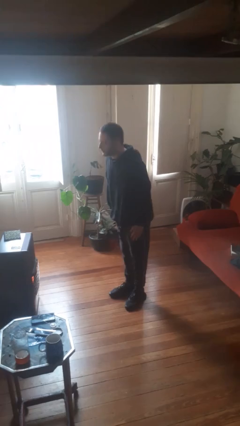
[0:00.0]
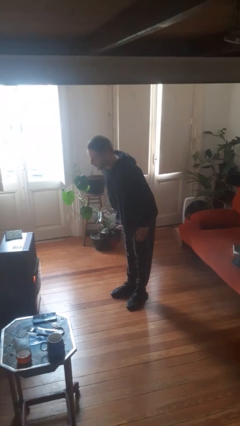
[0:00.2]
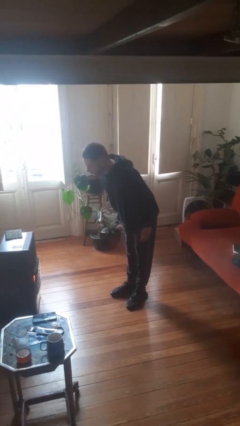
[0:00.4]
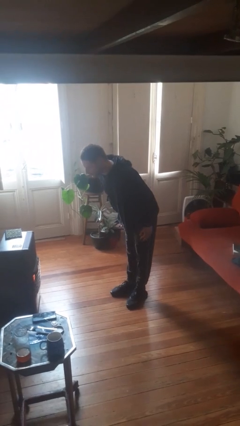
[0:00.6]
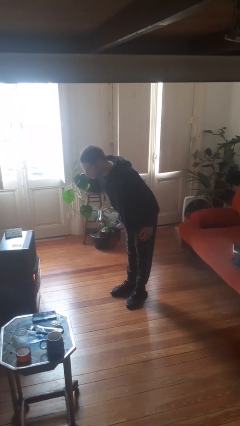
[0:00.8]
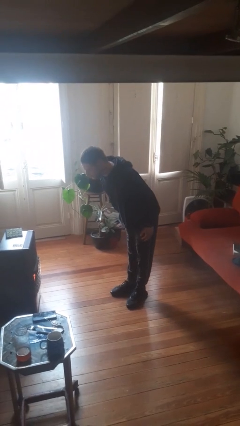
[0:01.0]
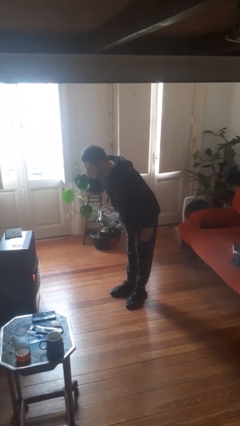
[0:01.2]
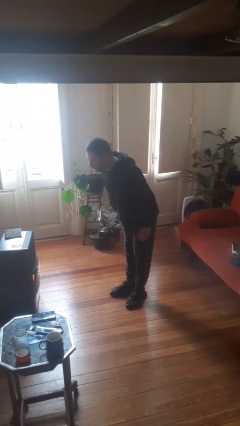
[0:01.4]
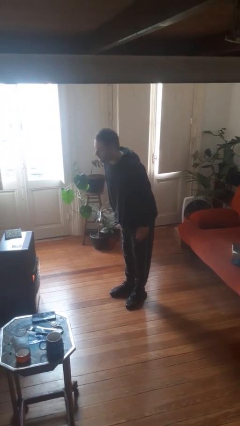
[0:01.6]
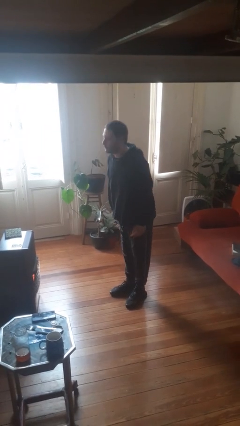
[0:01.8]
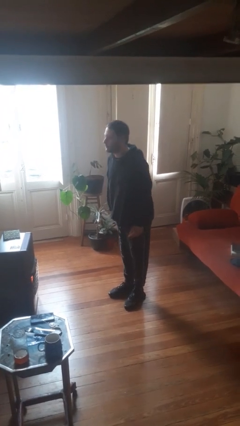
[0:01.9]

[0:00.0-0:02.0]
person bows

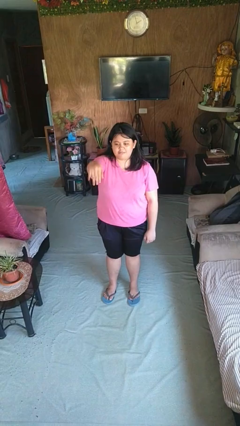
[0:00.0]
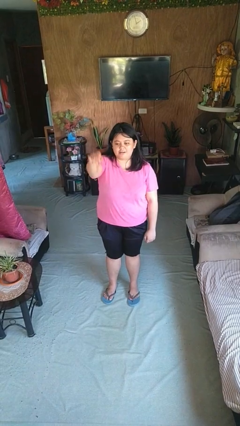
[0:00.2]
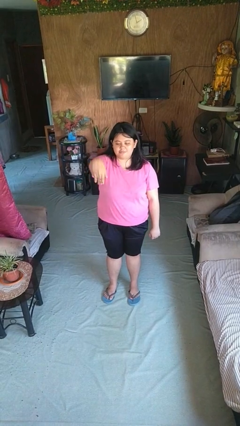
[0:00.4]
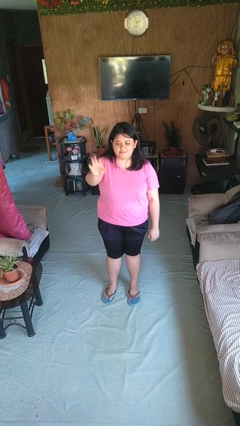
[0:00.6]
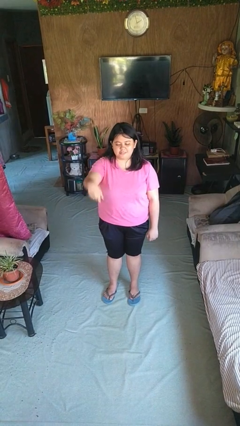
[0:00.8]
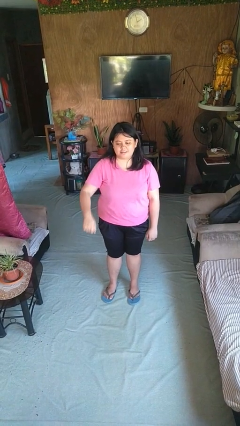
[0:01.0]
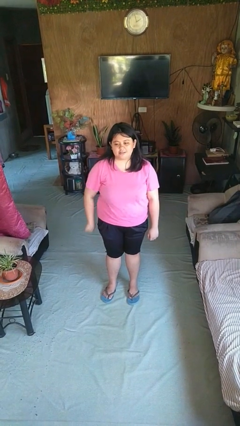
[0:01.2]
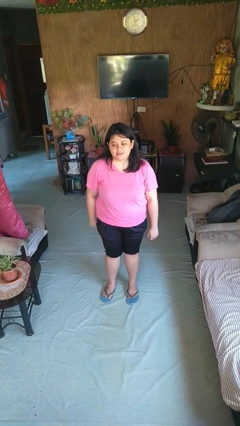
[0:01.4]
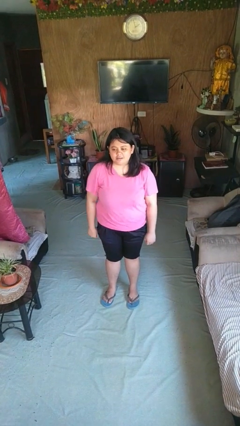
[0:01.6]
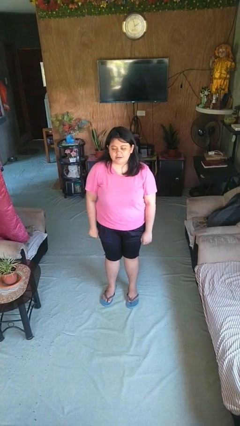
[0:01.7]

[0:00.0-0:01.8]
person gestures come here

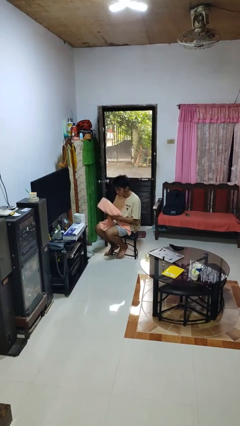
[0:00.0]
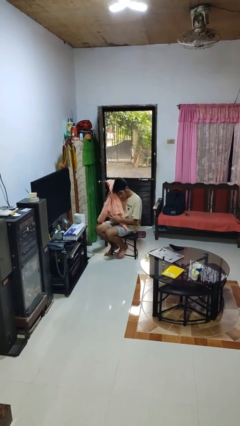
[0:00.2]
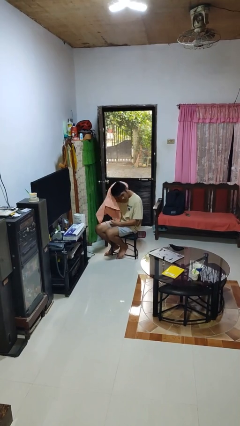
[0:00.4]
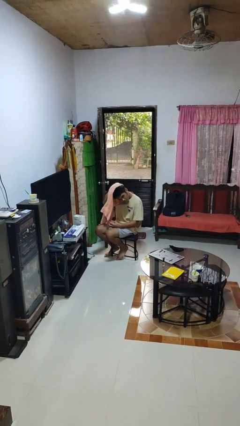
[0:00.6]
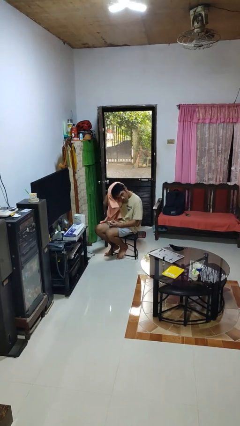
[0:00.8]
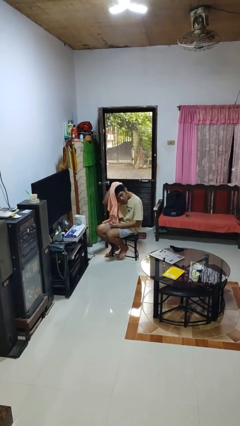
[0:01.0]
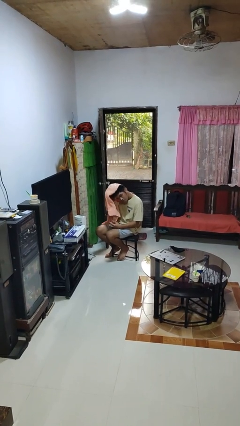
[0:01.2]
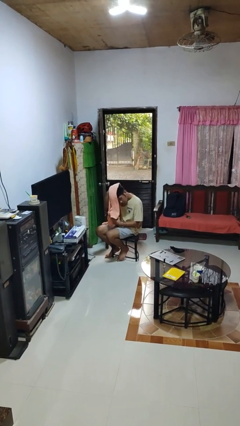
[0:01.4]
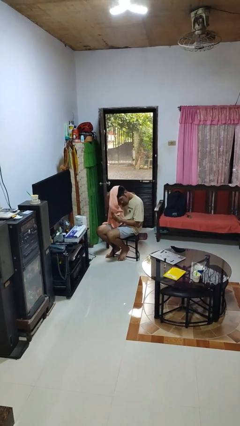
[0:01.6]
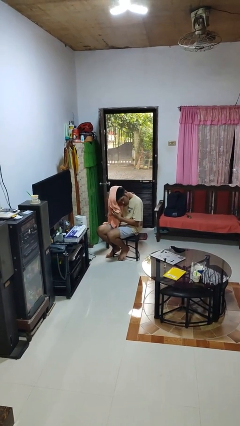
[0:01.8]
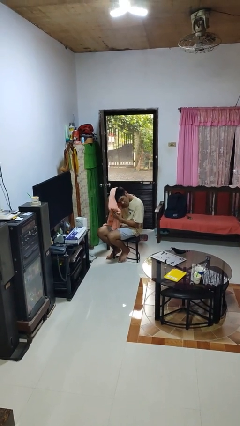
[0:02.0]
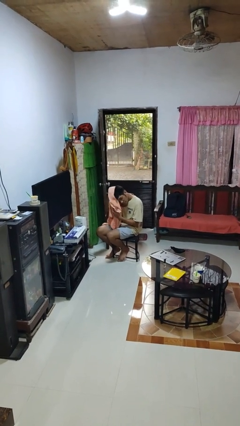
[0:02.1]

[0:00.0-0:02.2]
person dries hair with towel

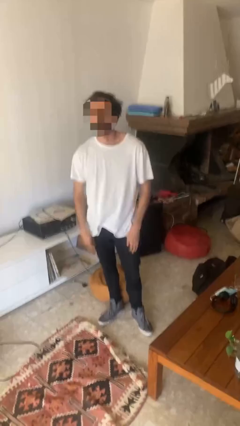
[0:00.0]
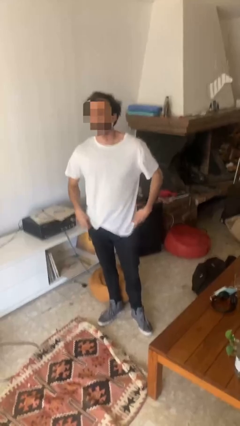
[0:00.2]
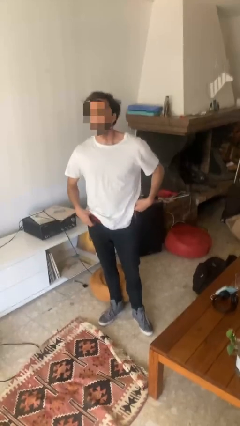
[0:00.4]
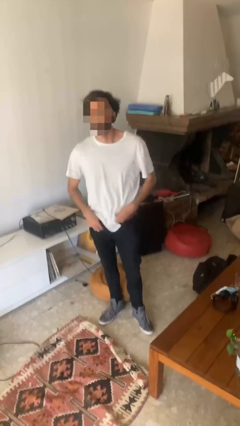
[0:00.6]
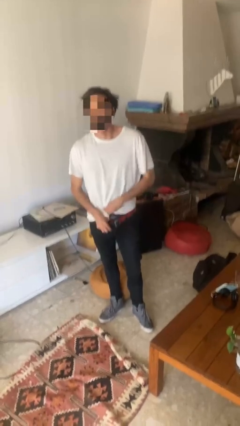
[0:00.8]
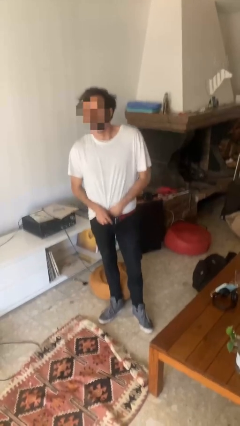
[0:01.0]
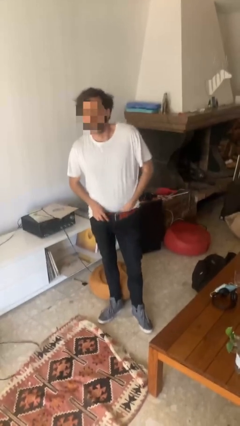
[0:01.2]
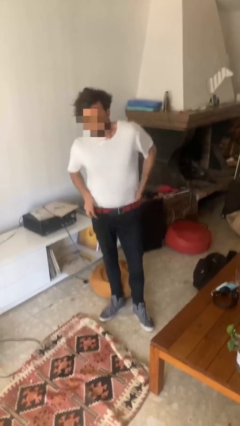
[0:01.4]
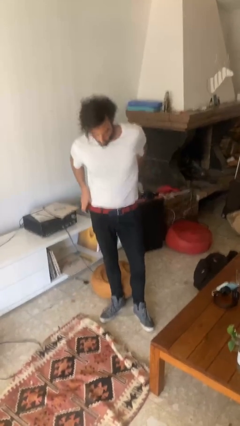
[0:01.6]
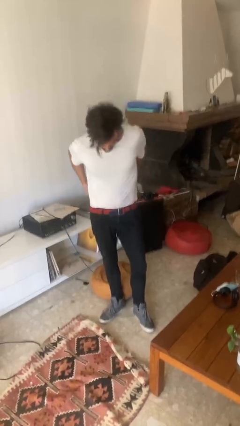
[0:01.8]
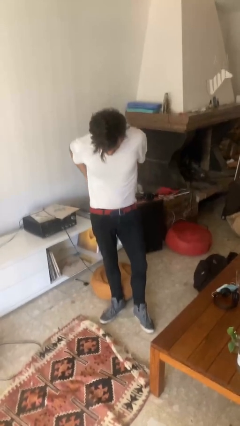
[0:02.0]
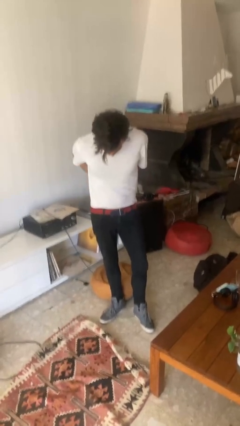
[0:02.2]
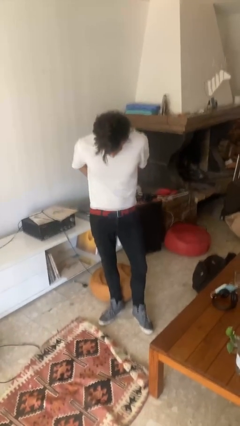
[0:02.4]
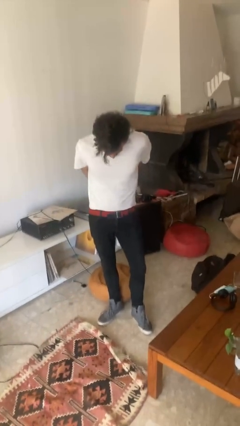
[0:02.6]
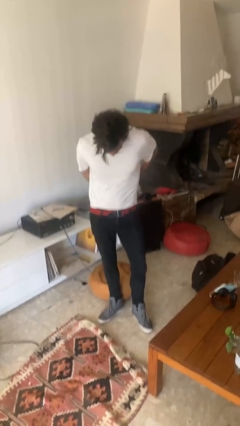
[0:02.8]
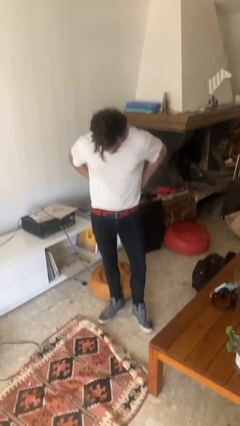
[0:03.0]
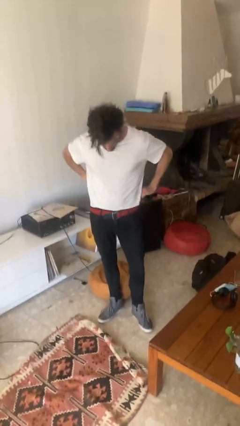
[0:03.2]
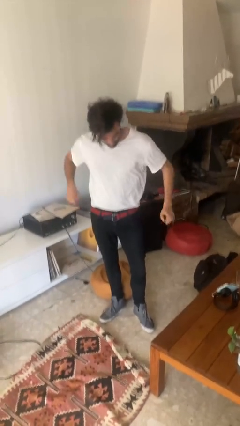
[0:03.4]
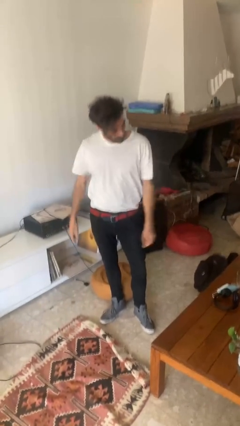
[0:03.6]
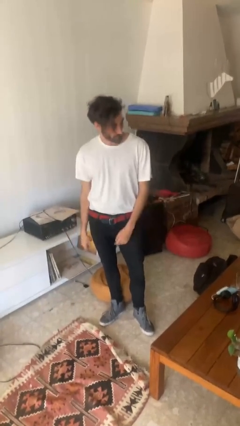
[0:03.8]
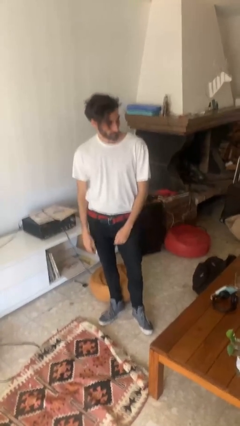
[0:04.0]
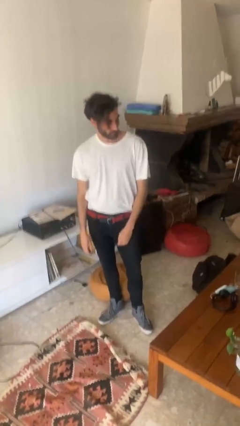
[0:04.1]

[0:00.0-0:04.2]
person tucks in shirt

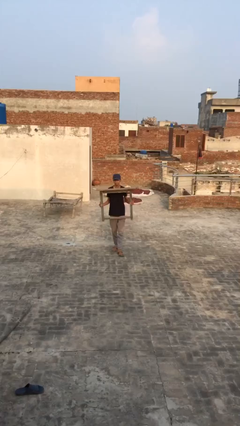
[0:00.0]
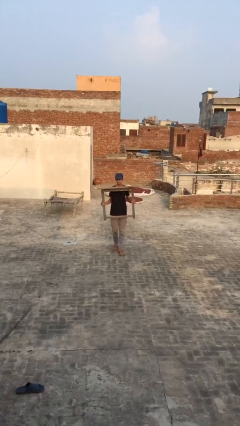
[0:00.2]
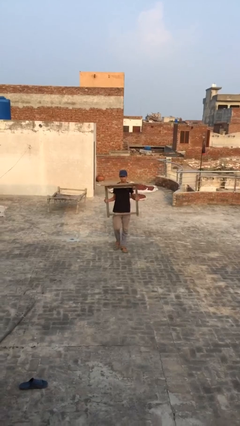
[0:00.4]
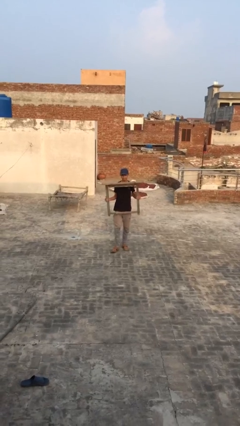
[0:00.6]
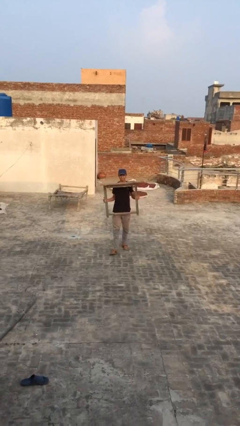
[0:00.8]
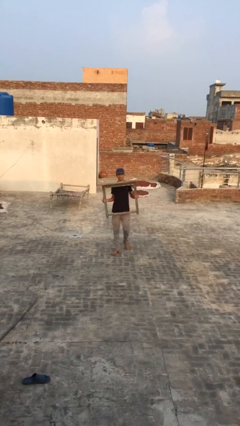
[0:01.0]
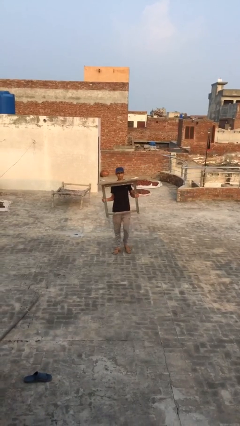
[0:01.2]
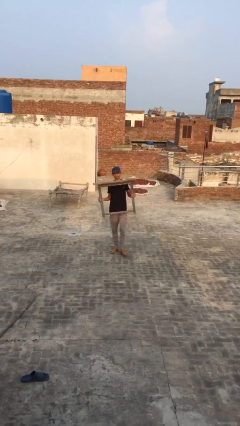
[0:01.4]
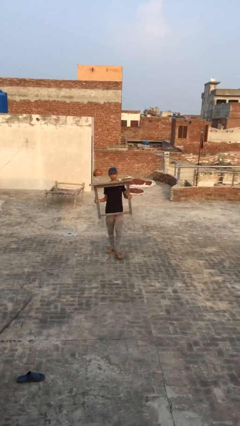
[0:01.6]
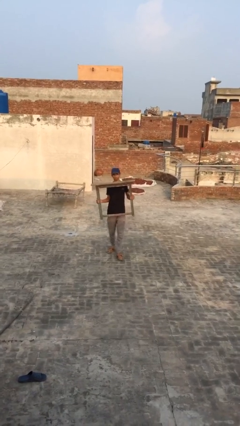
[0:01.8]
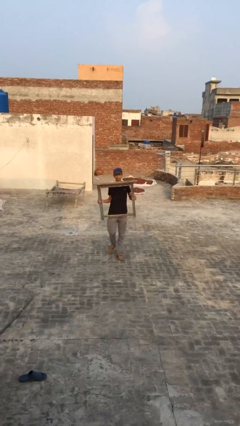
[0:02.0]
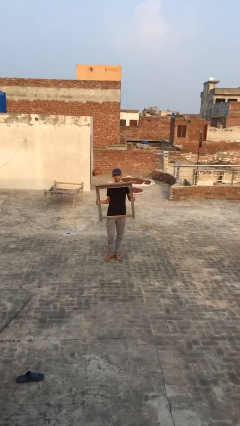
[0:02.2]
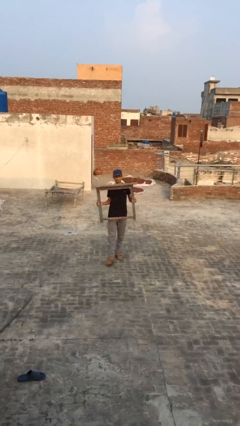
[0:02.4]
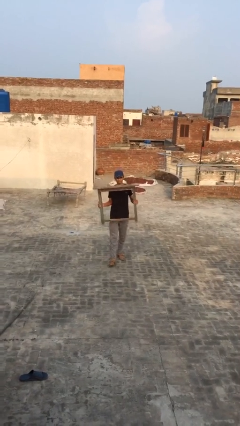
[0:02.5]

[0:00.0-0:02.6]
person carries heavy object

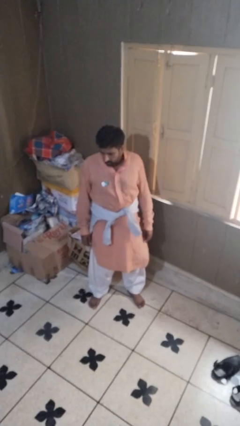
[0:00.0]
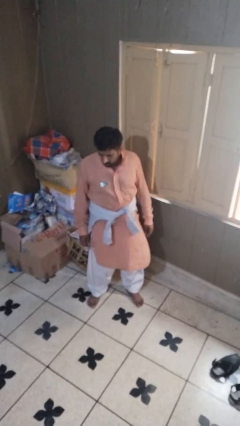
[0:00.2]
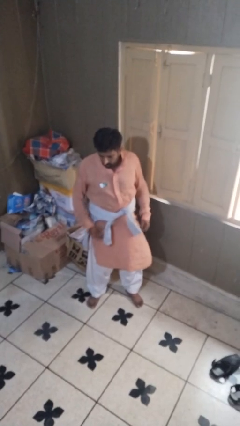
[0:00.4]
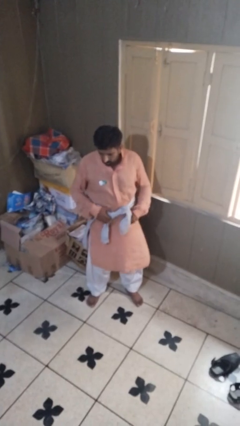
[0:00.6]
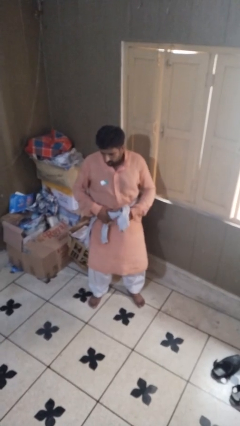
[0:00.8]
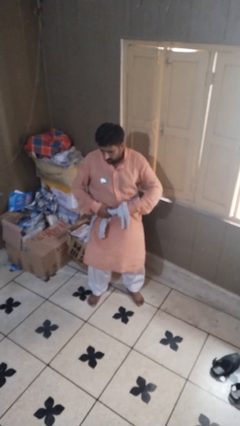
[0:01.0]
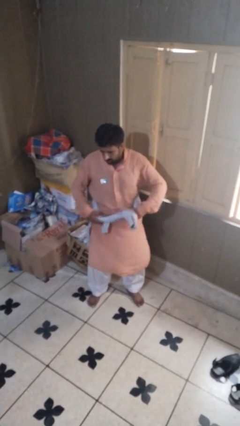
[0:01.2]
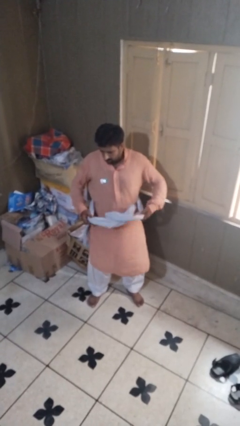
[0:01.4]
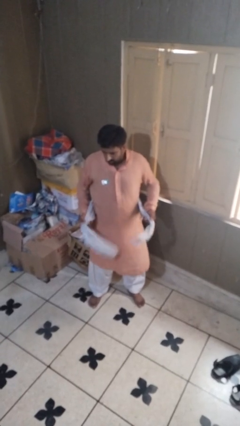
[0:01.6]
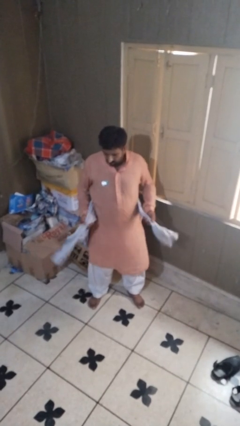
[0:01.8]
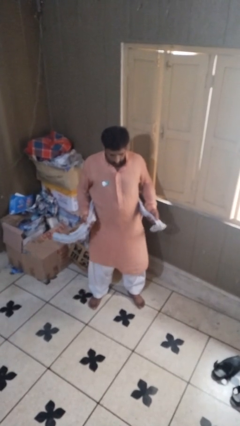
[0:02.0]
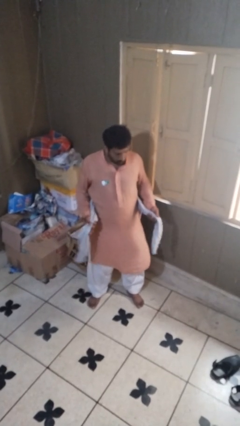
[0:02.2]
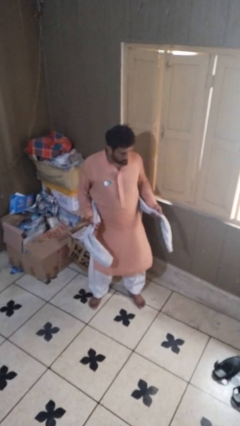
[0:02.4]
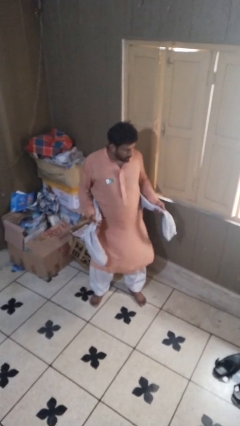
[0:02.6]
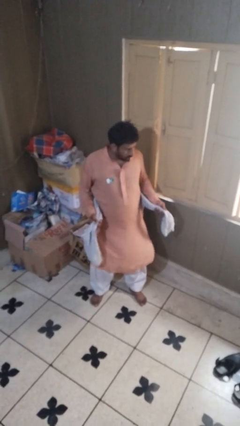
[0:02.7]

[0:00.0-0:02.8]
person unties jacket around waist

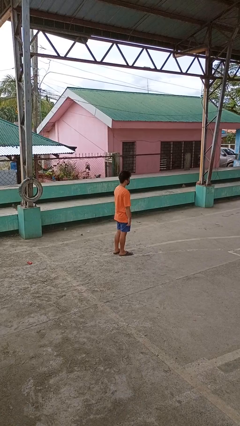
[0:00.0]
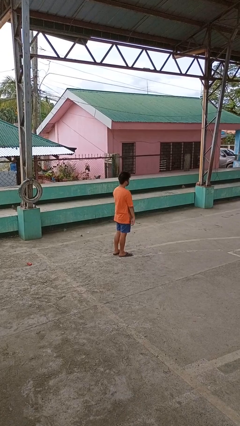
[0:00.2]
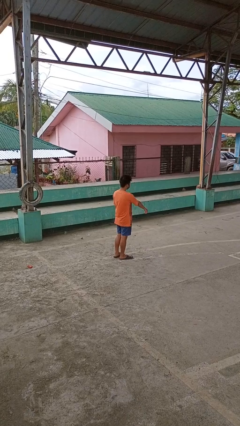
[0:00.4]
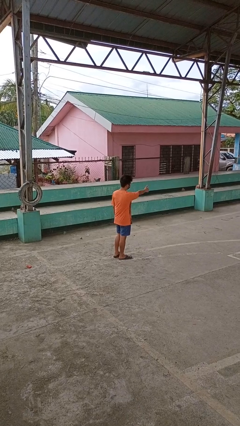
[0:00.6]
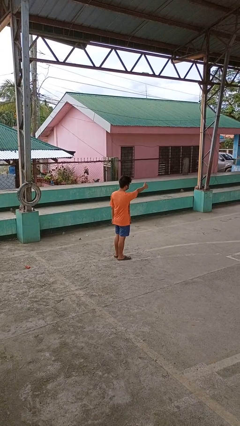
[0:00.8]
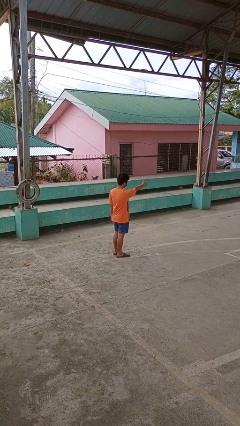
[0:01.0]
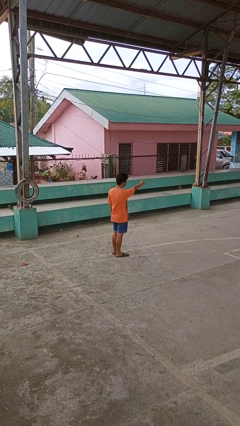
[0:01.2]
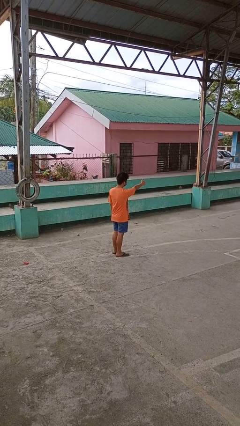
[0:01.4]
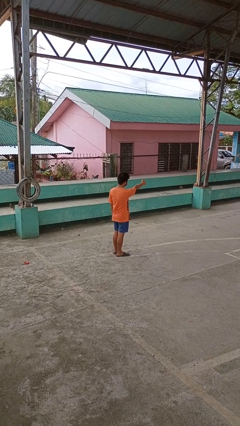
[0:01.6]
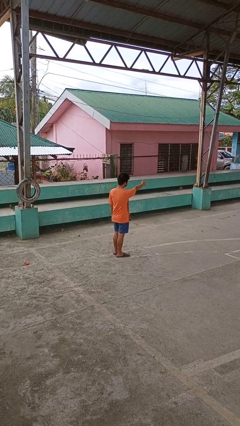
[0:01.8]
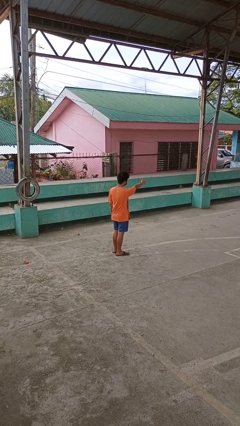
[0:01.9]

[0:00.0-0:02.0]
person gestures thumbs up
